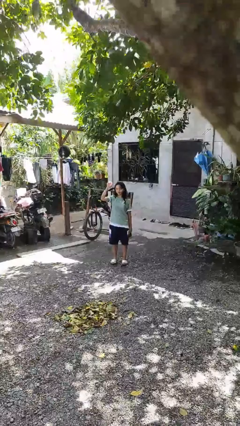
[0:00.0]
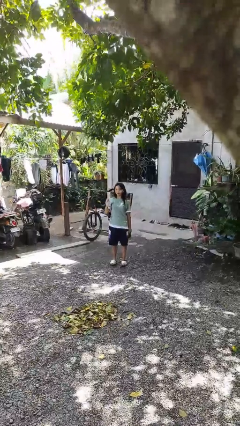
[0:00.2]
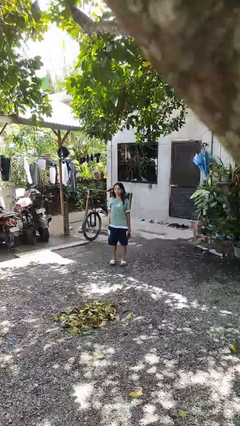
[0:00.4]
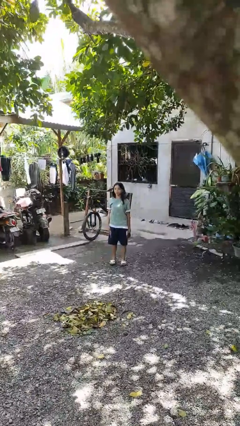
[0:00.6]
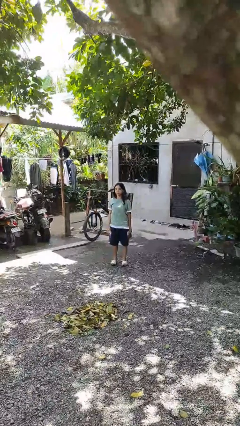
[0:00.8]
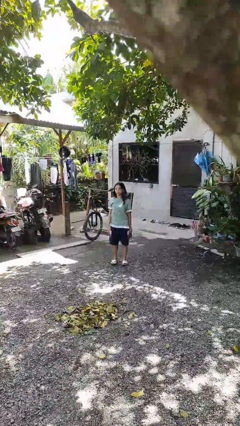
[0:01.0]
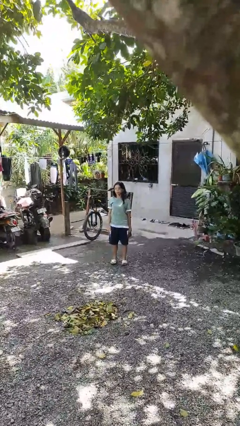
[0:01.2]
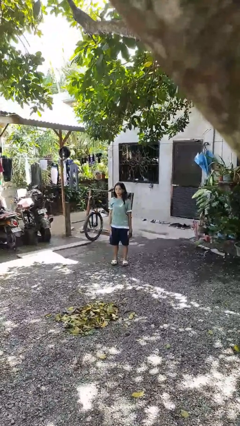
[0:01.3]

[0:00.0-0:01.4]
person gestures lower hand

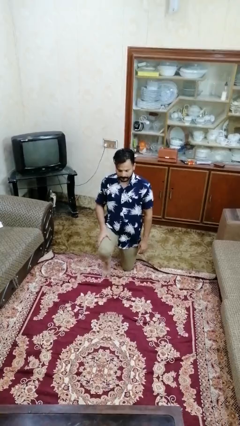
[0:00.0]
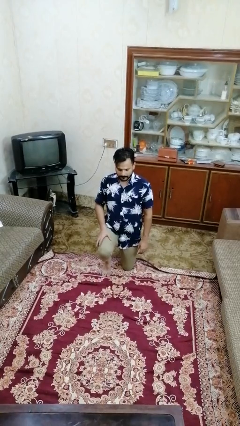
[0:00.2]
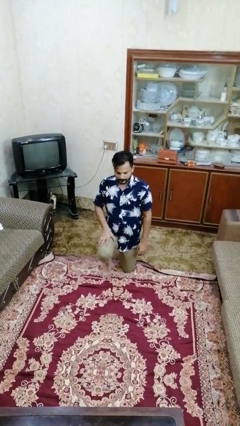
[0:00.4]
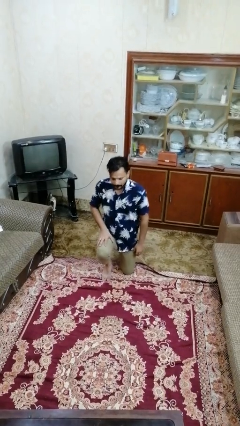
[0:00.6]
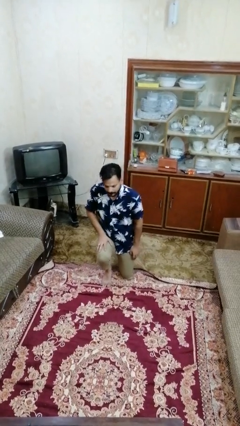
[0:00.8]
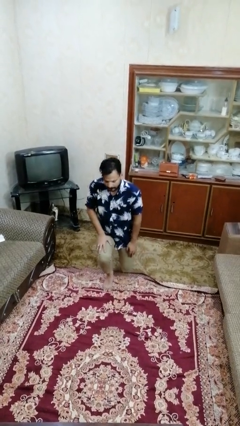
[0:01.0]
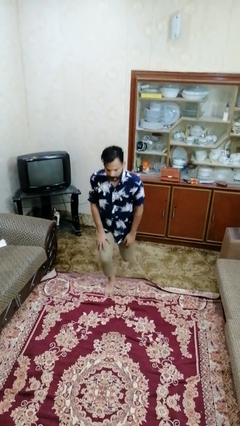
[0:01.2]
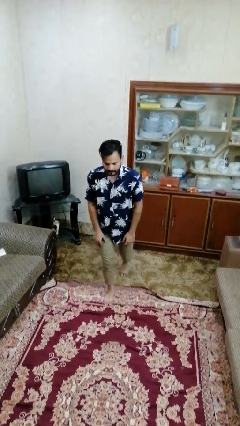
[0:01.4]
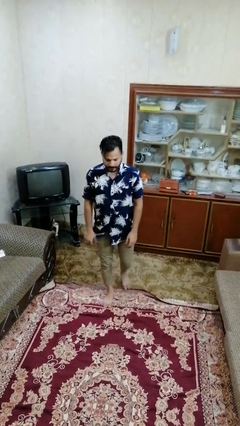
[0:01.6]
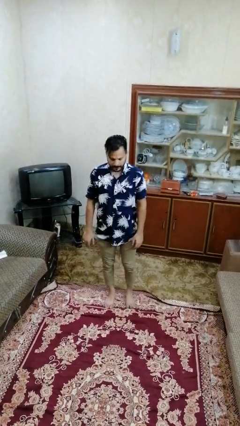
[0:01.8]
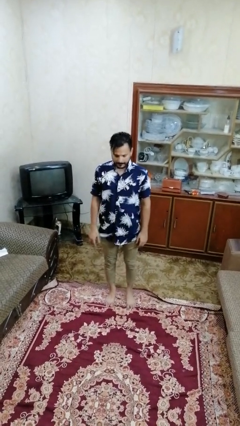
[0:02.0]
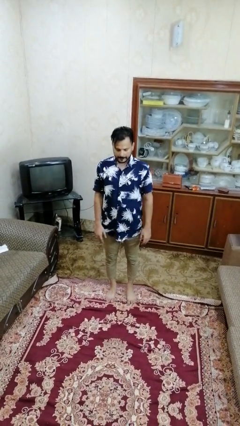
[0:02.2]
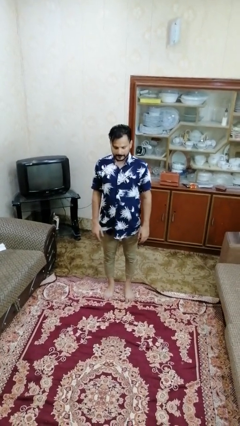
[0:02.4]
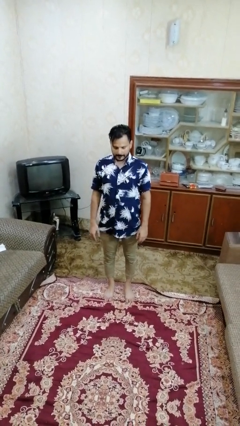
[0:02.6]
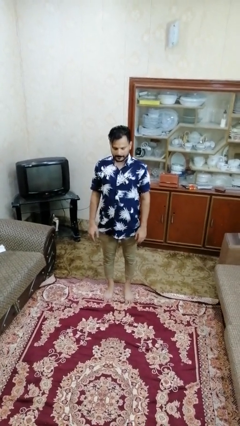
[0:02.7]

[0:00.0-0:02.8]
person stands up from floor

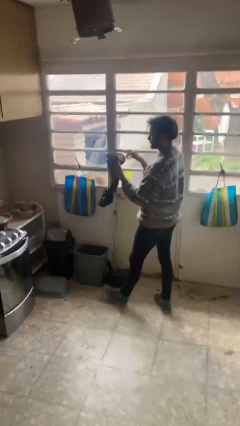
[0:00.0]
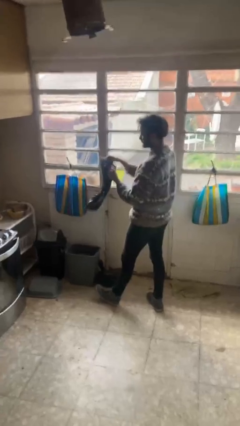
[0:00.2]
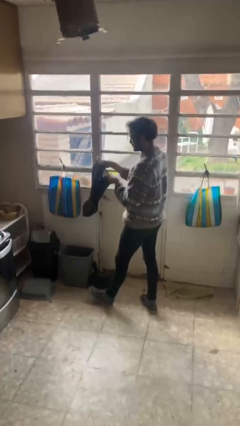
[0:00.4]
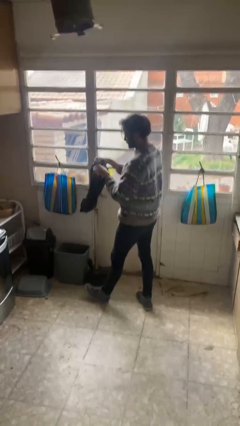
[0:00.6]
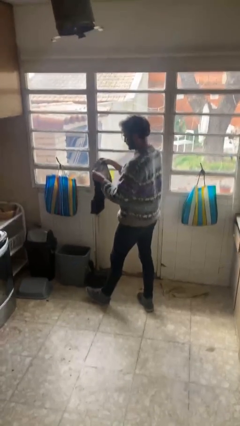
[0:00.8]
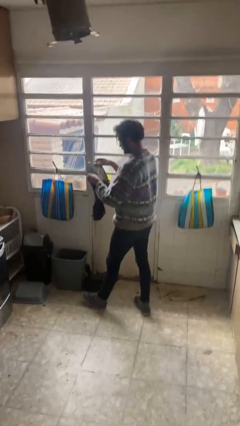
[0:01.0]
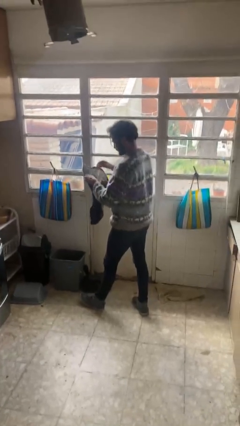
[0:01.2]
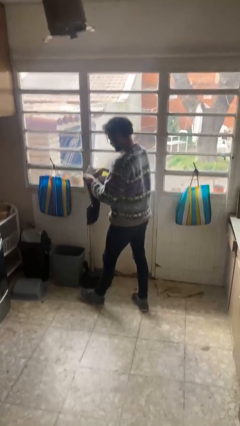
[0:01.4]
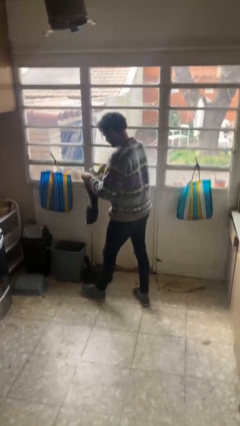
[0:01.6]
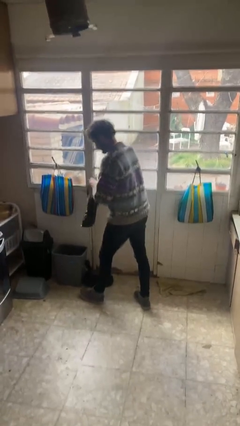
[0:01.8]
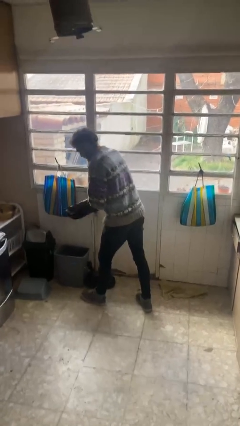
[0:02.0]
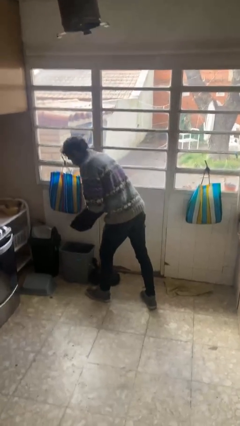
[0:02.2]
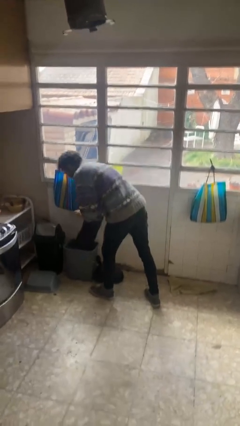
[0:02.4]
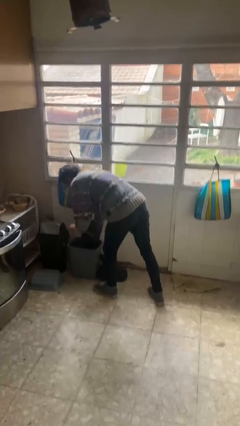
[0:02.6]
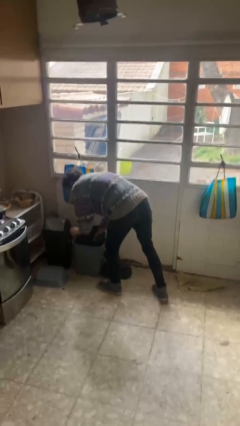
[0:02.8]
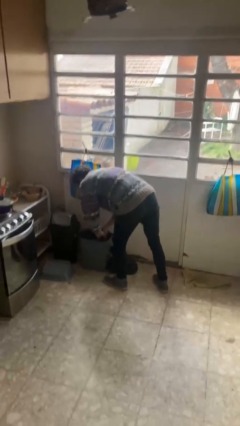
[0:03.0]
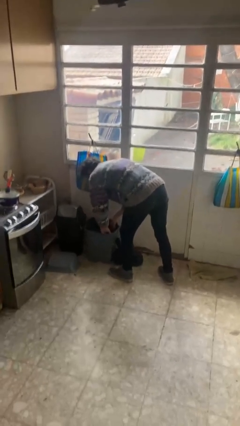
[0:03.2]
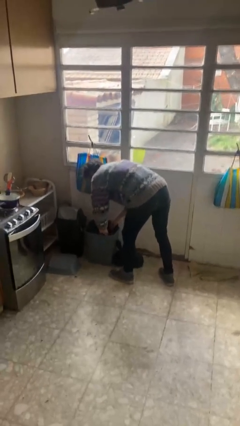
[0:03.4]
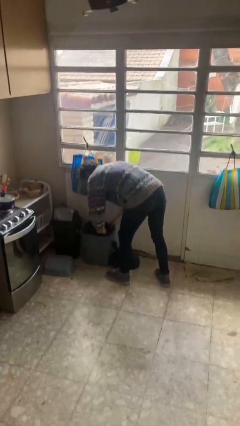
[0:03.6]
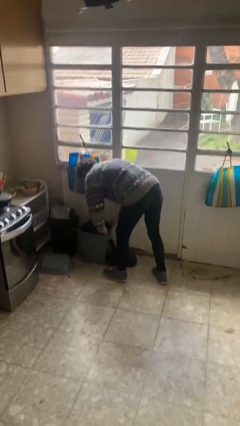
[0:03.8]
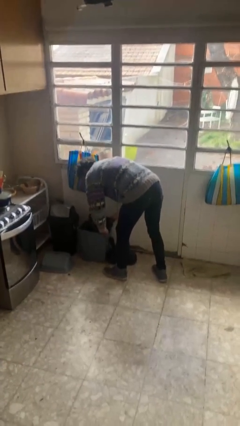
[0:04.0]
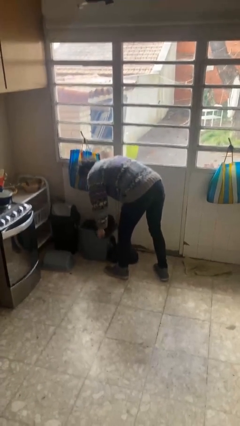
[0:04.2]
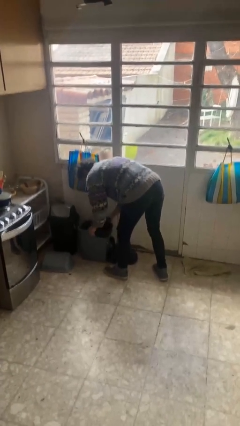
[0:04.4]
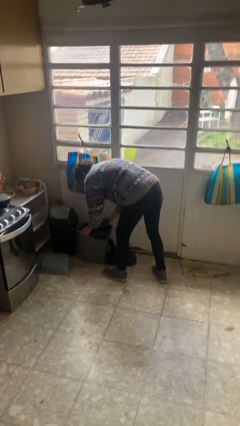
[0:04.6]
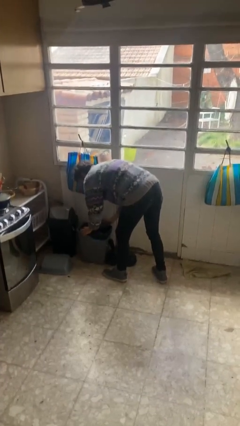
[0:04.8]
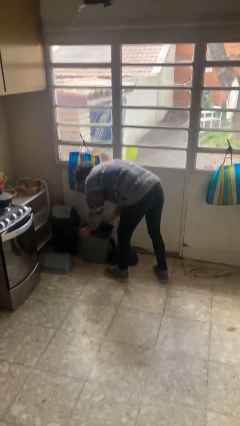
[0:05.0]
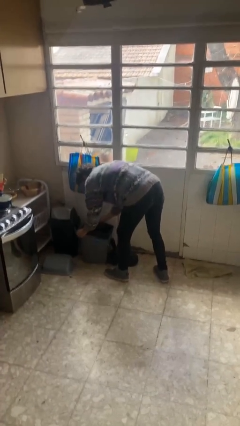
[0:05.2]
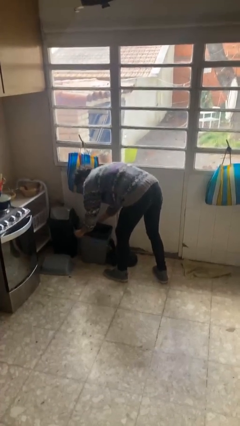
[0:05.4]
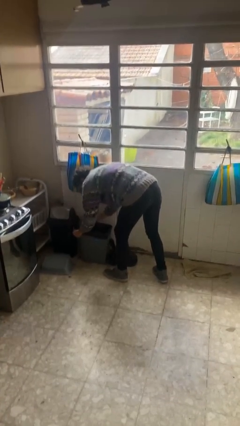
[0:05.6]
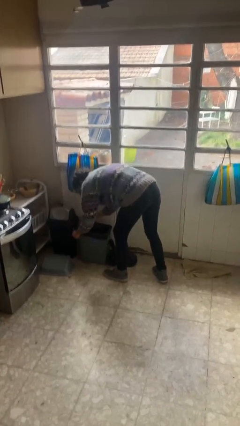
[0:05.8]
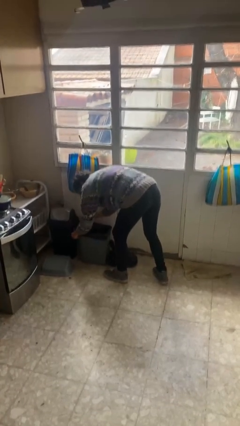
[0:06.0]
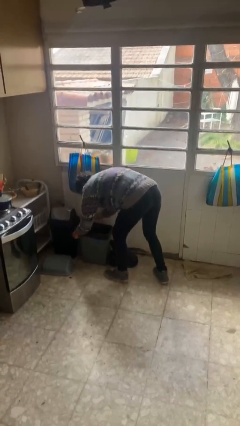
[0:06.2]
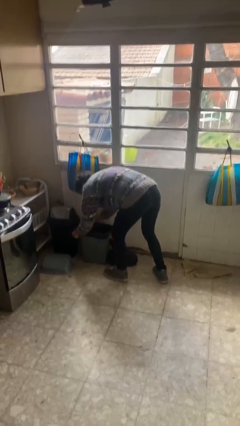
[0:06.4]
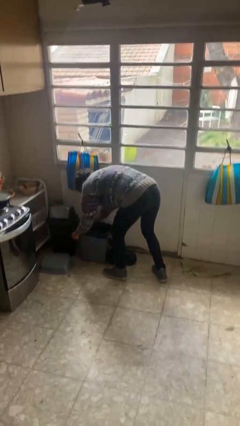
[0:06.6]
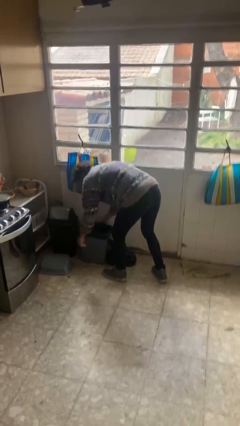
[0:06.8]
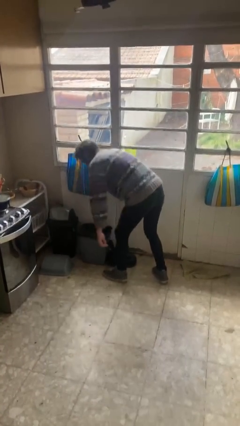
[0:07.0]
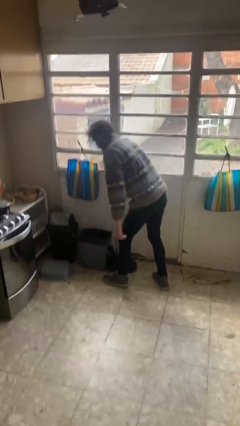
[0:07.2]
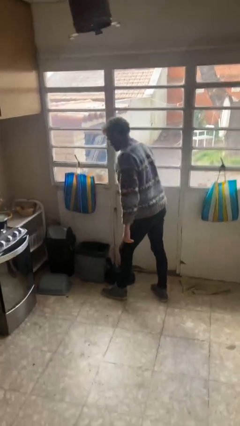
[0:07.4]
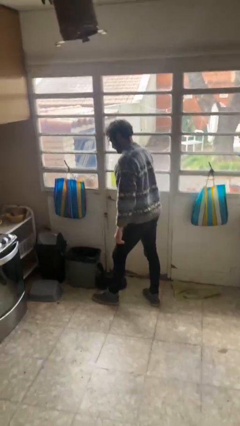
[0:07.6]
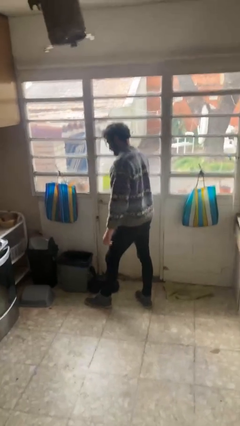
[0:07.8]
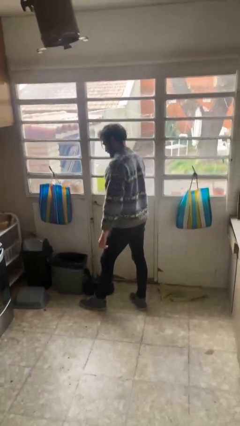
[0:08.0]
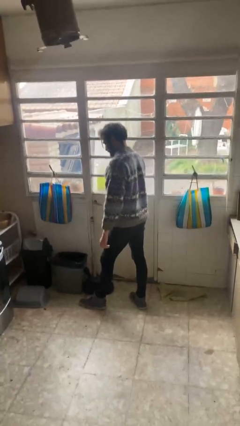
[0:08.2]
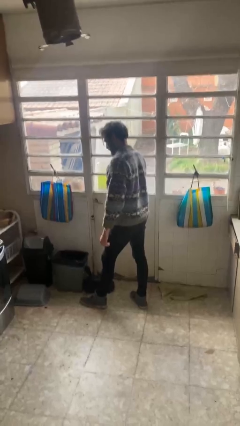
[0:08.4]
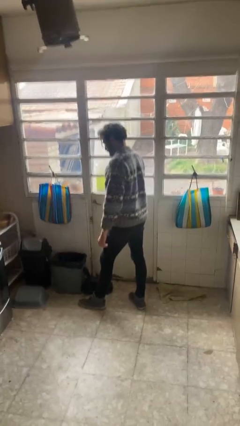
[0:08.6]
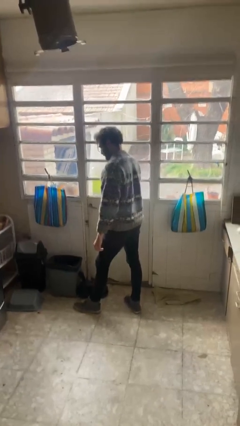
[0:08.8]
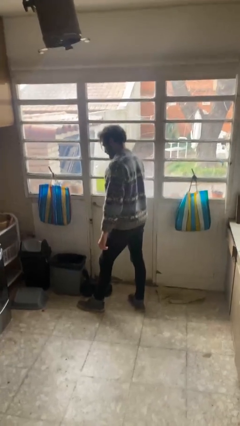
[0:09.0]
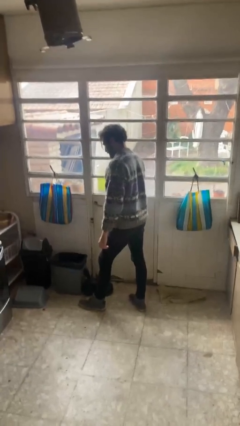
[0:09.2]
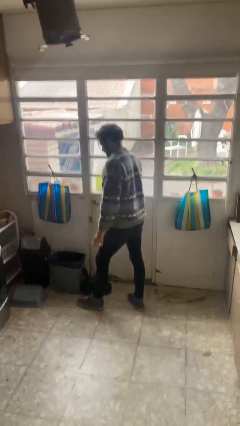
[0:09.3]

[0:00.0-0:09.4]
person inserts trashbag into trashcan

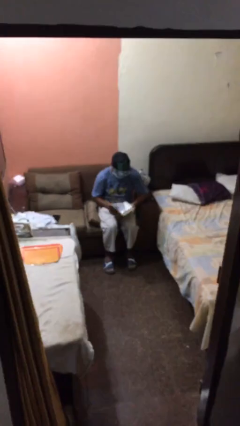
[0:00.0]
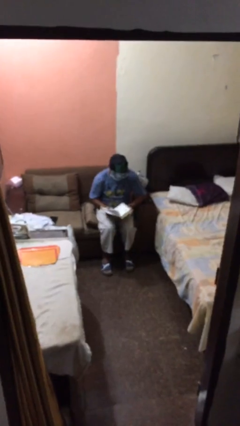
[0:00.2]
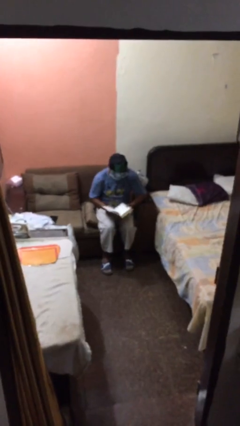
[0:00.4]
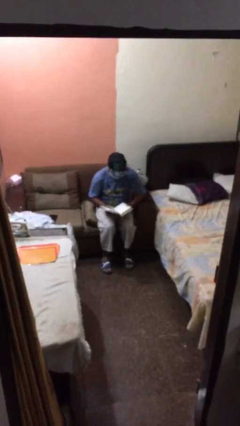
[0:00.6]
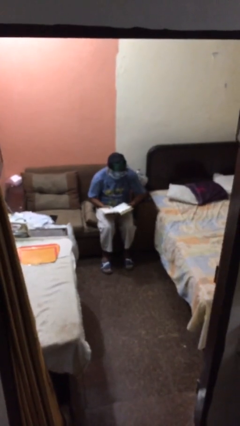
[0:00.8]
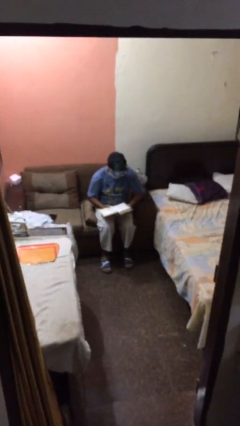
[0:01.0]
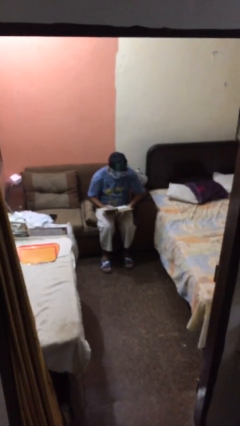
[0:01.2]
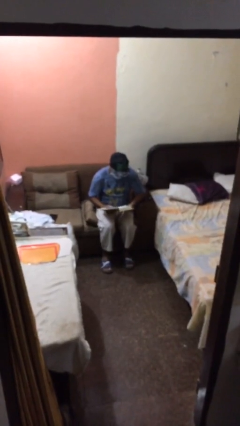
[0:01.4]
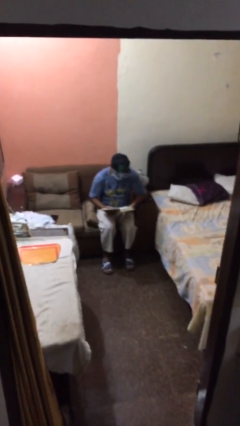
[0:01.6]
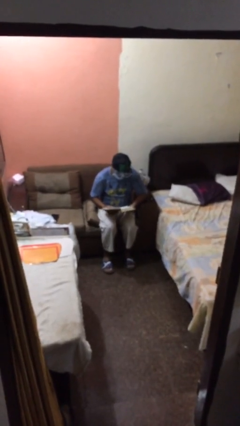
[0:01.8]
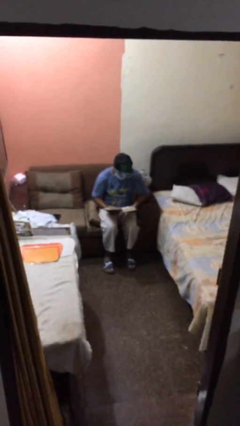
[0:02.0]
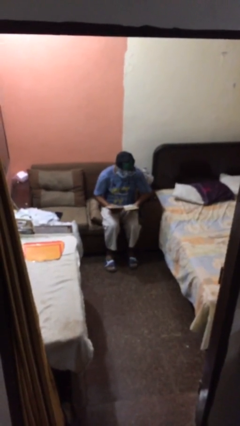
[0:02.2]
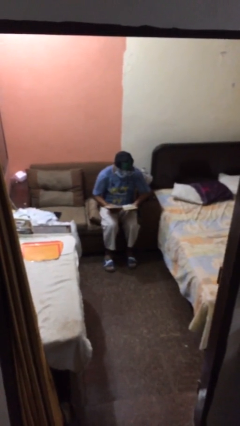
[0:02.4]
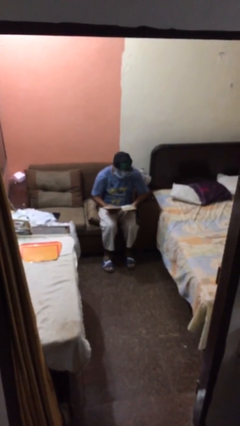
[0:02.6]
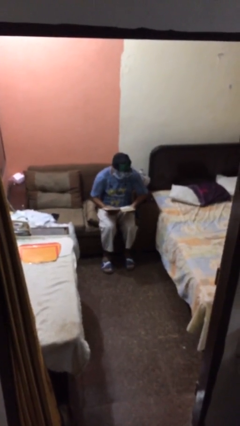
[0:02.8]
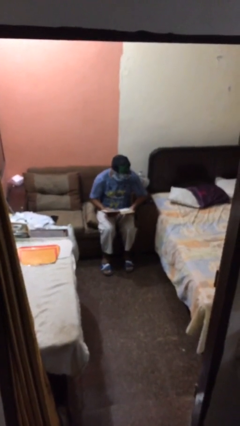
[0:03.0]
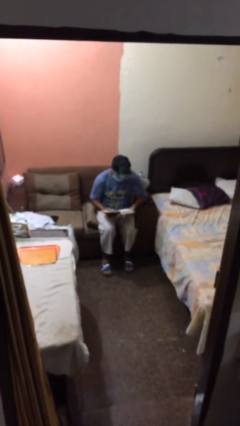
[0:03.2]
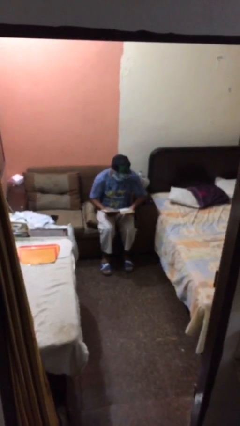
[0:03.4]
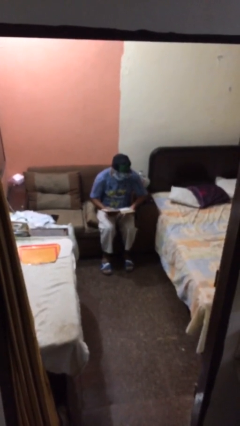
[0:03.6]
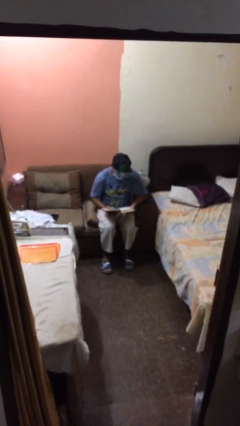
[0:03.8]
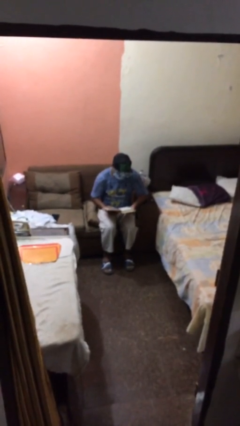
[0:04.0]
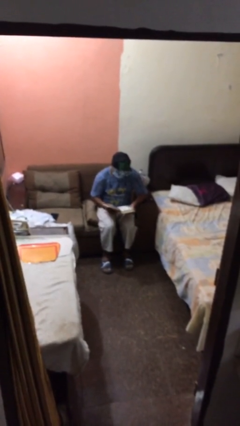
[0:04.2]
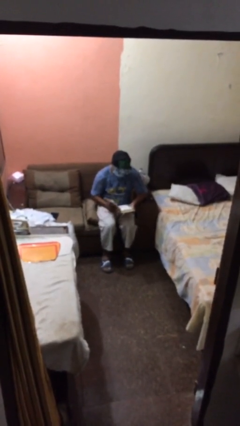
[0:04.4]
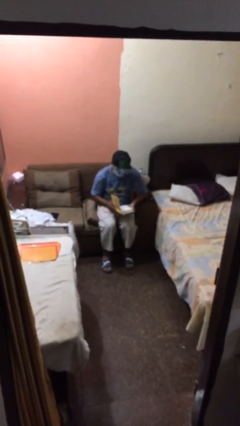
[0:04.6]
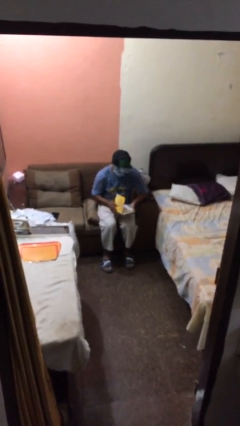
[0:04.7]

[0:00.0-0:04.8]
person reads document
